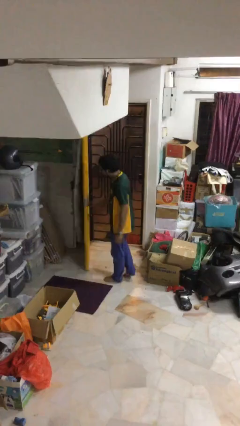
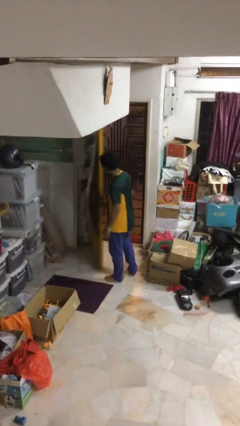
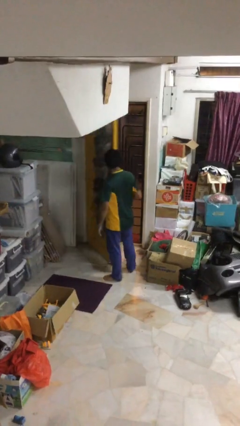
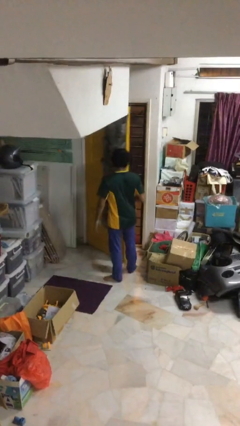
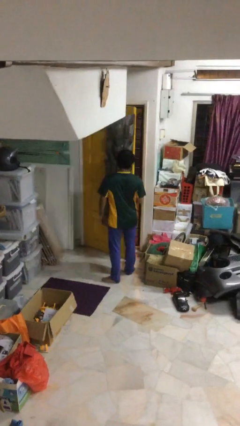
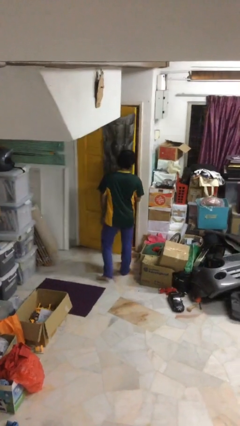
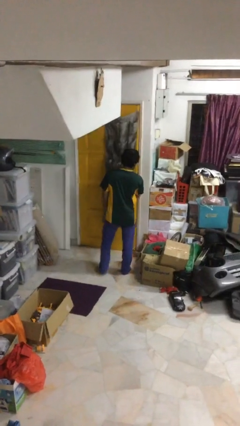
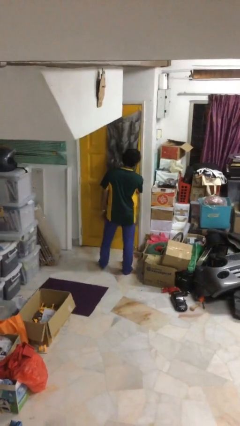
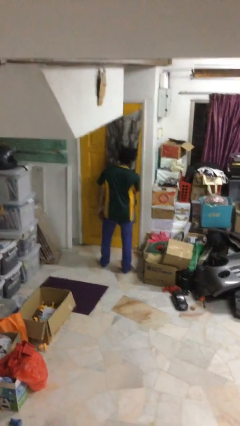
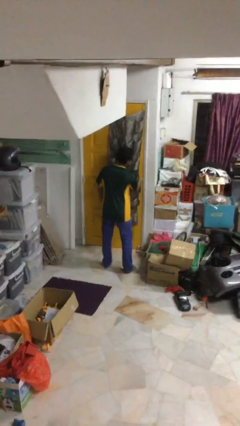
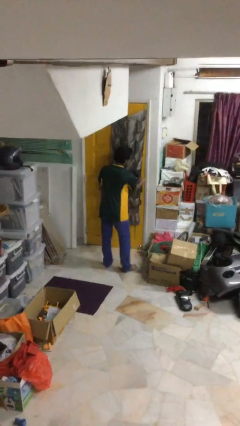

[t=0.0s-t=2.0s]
person closes facility door

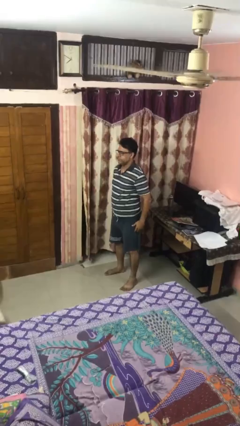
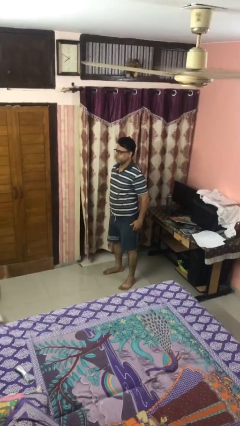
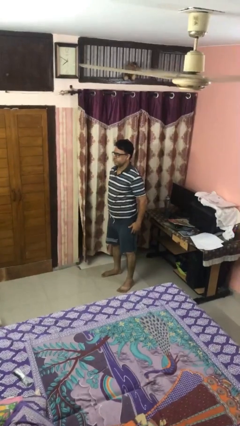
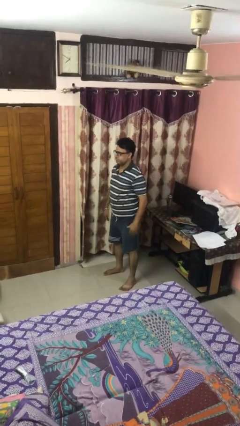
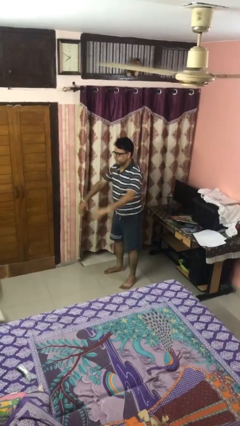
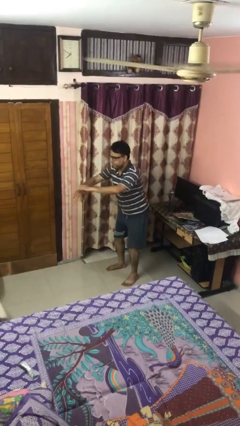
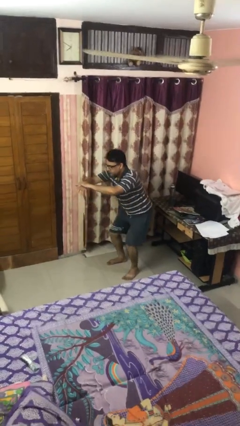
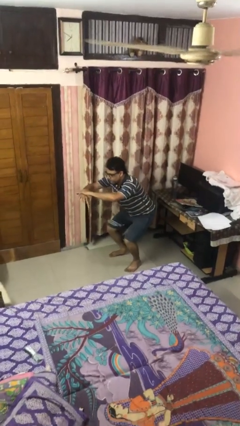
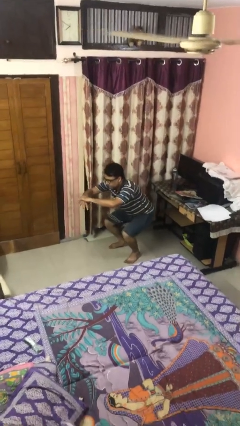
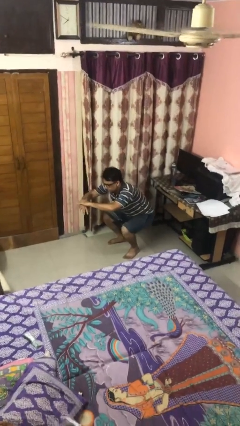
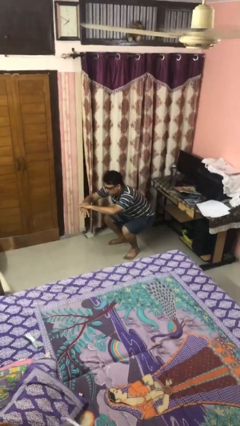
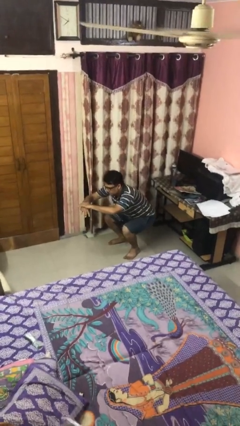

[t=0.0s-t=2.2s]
person squats

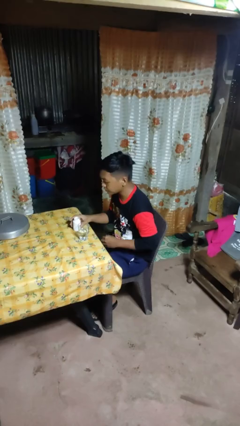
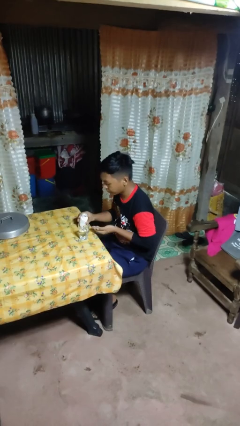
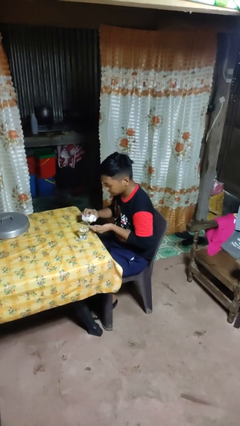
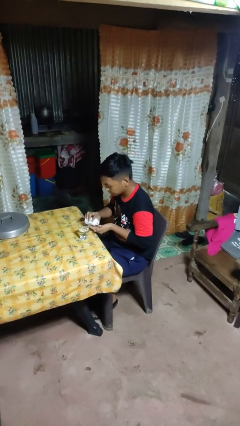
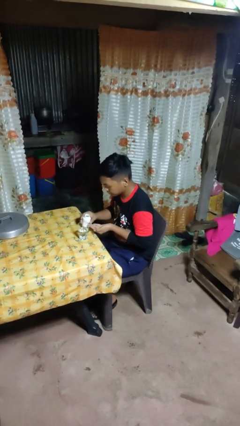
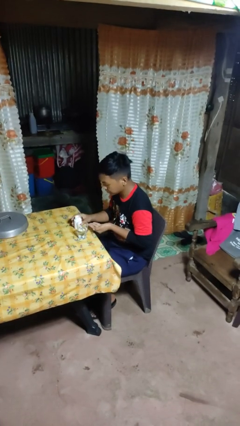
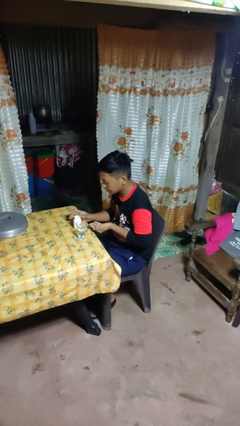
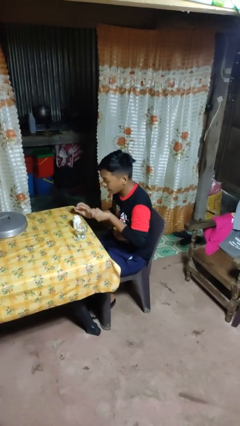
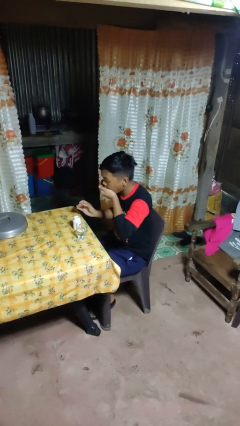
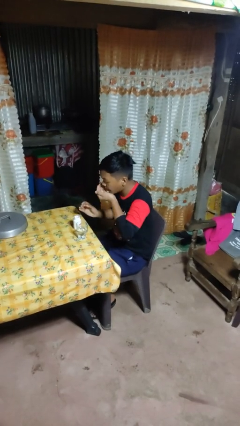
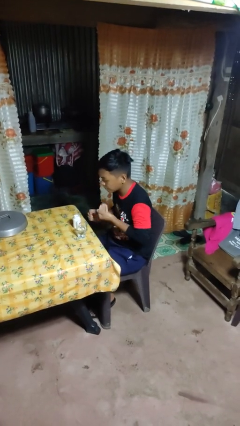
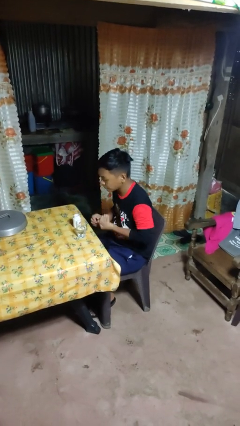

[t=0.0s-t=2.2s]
person takes medicine pills

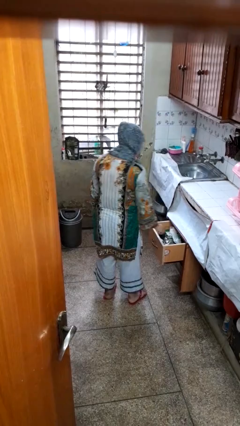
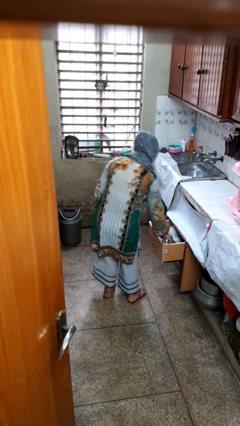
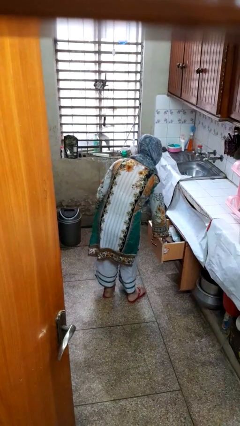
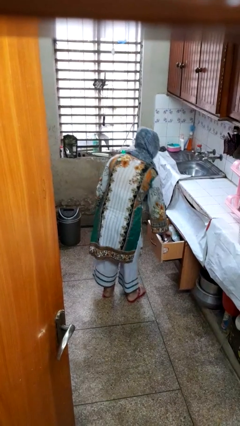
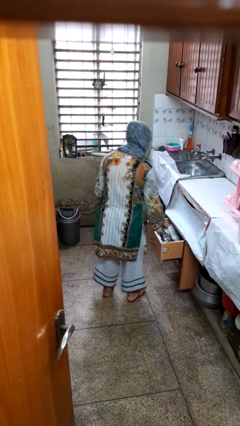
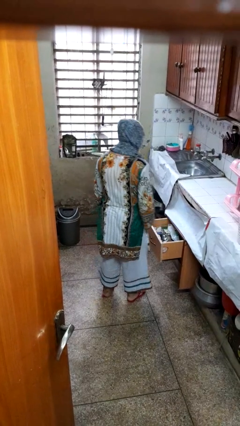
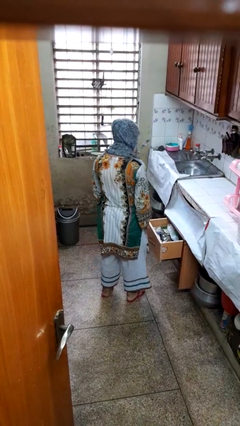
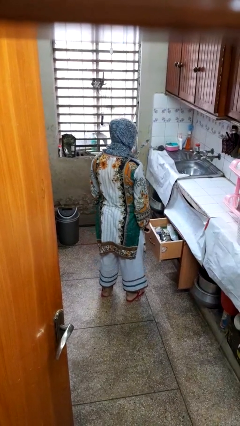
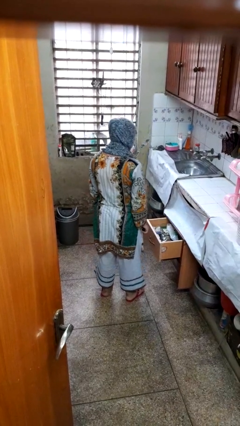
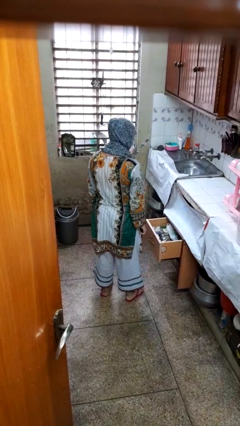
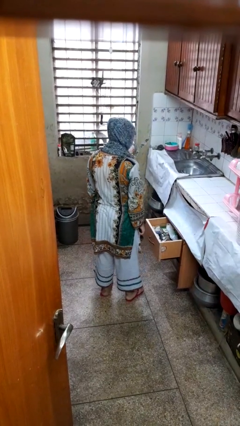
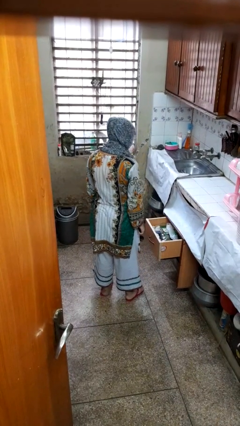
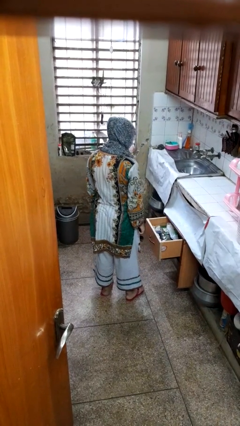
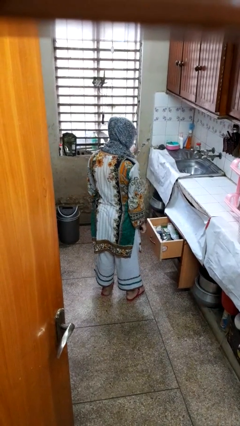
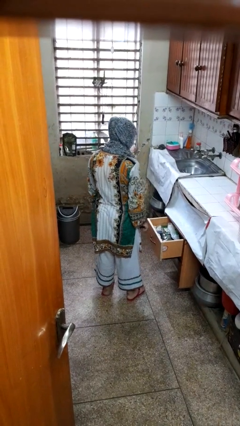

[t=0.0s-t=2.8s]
person takes object from kitchen drawer

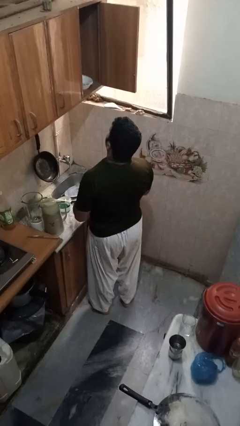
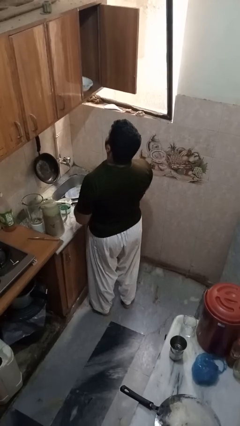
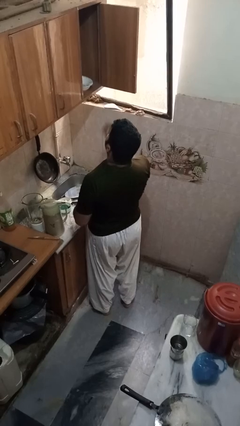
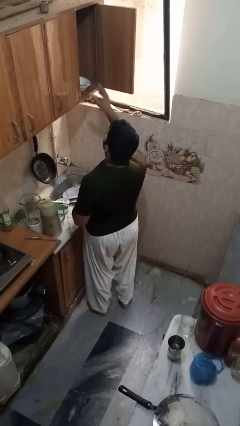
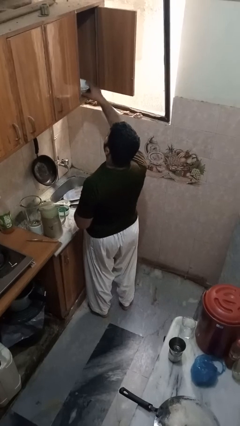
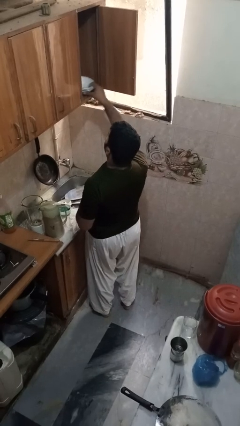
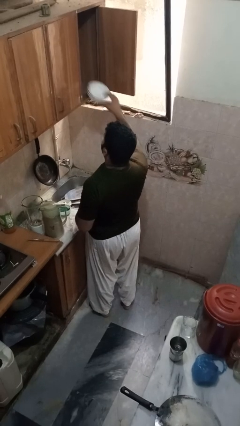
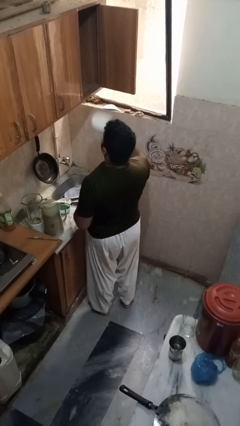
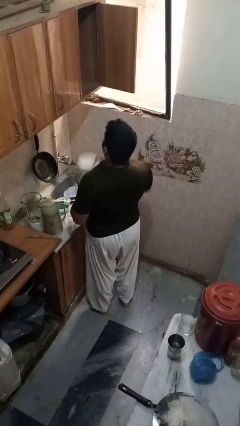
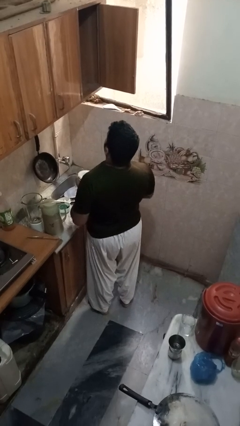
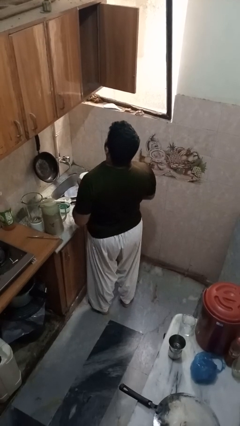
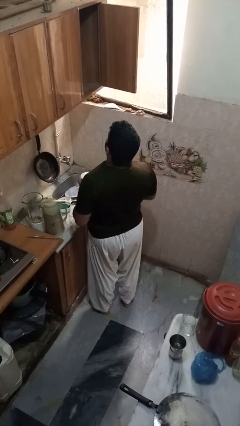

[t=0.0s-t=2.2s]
person takes object from cabinet

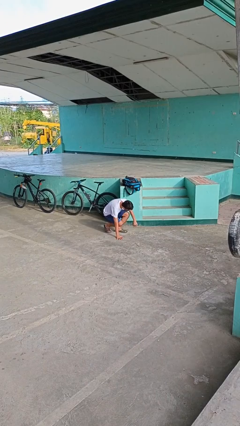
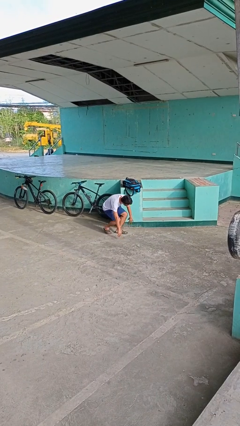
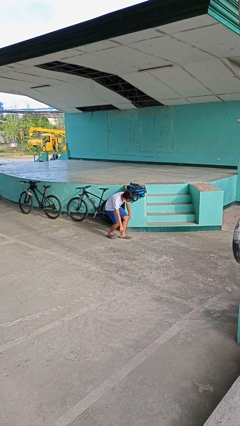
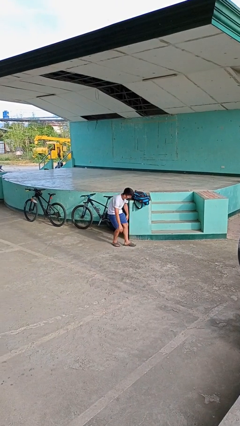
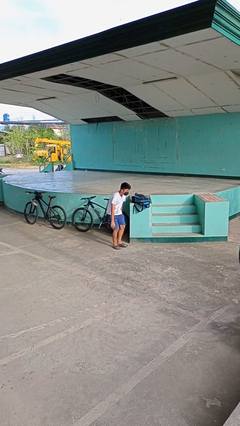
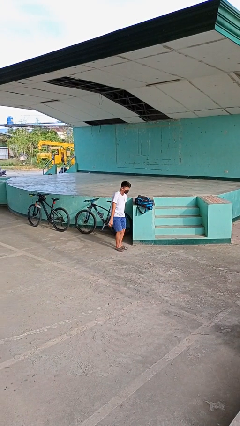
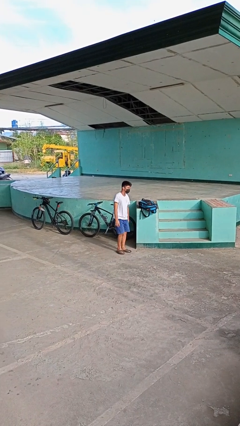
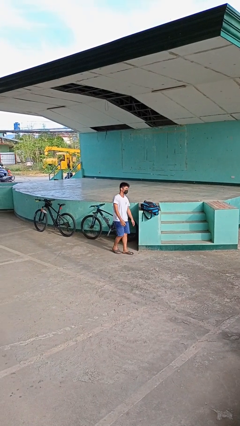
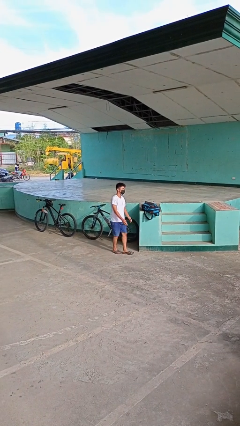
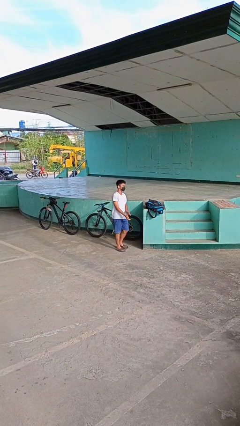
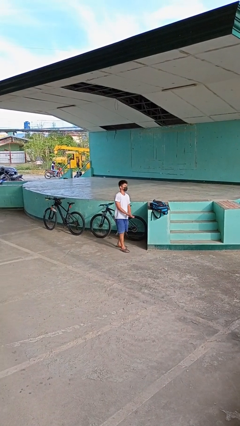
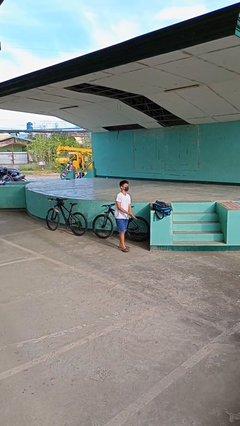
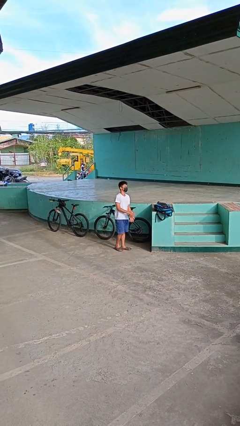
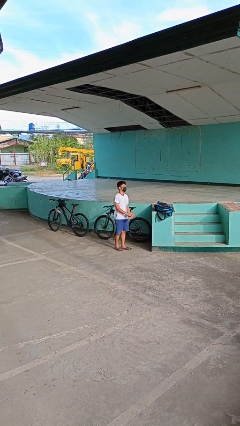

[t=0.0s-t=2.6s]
person stands up from floor

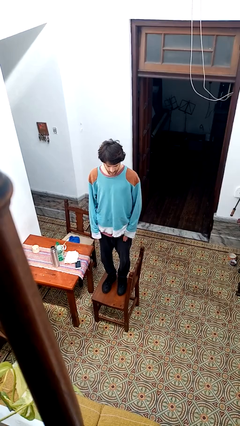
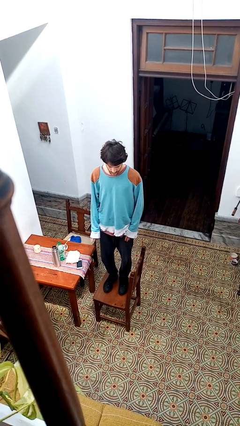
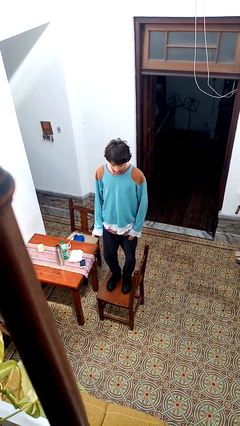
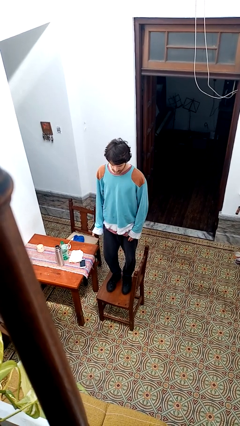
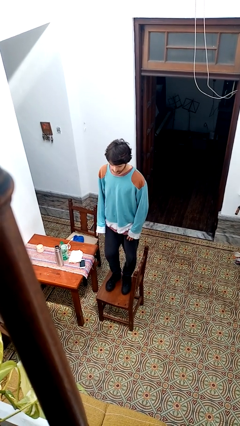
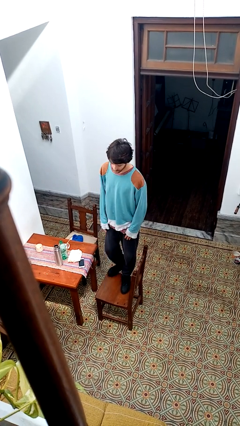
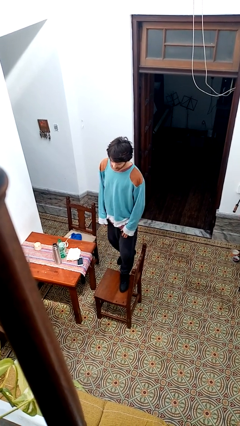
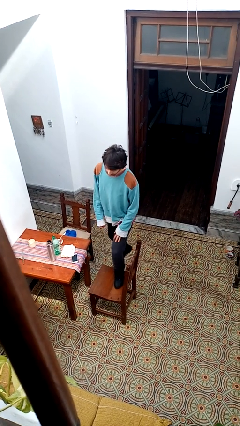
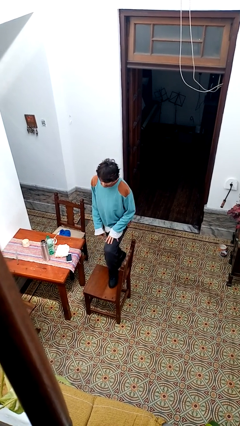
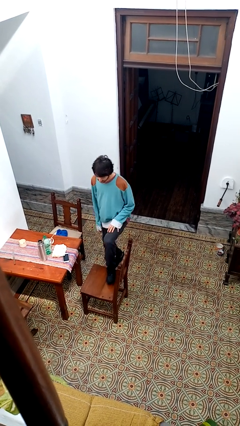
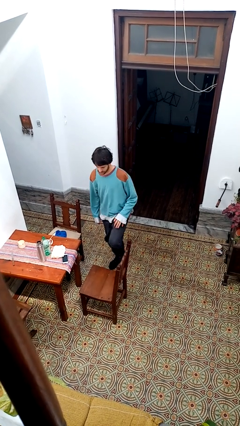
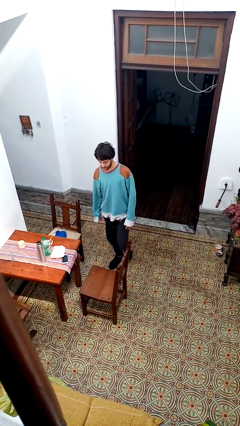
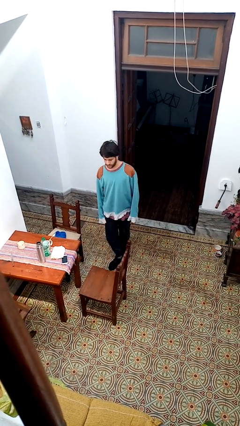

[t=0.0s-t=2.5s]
person climbs off chair

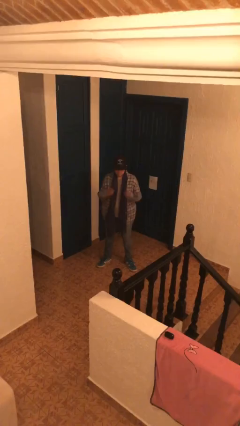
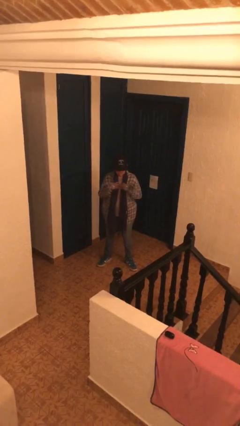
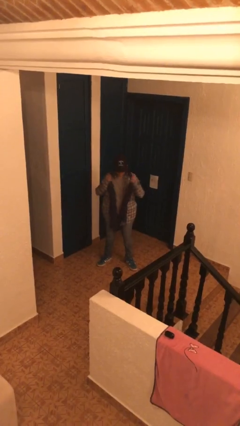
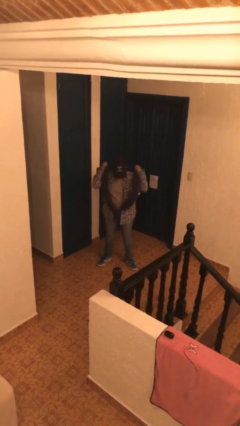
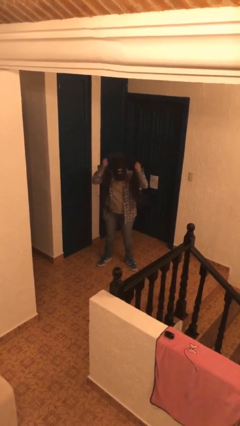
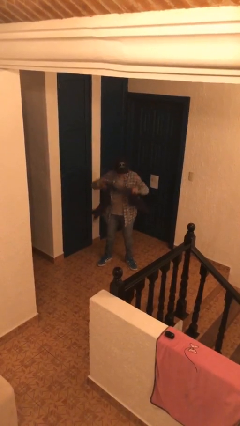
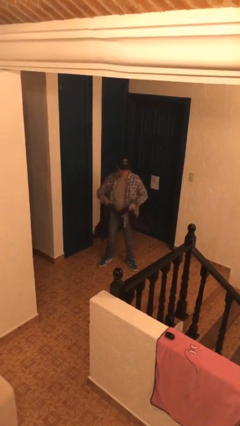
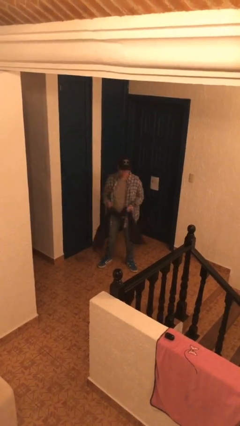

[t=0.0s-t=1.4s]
person takes off scarf
